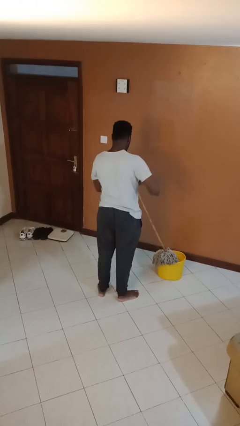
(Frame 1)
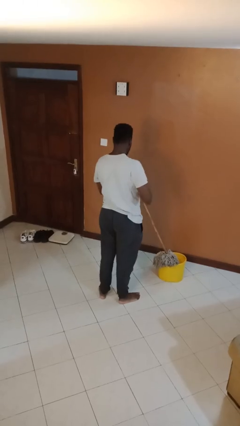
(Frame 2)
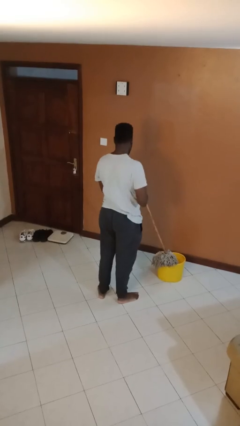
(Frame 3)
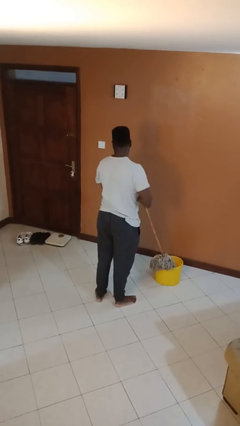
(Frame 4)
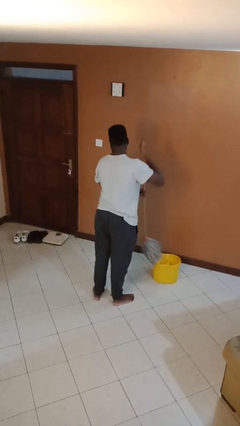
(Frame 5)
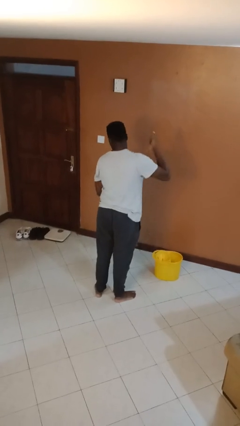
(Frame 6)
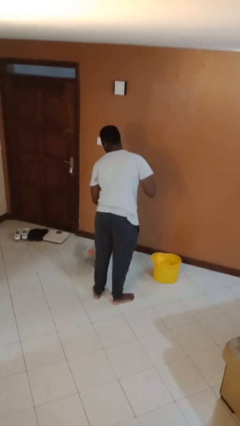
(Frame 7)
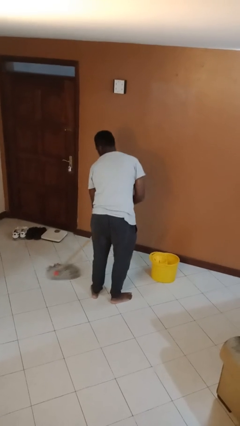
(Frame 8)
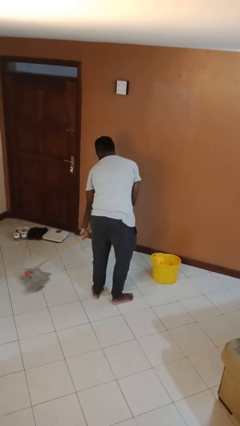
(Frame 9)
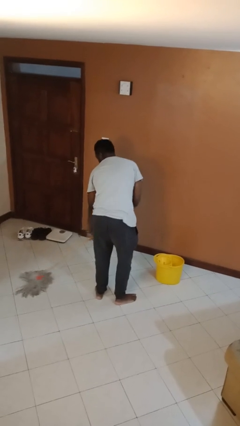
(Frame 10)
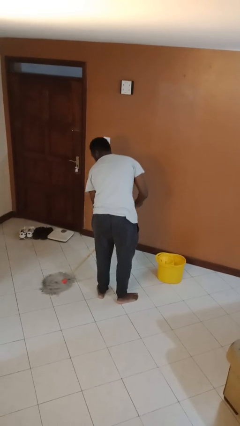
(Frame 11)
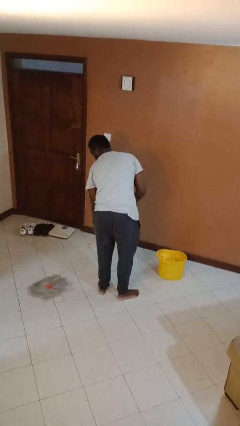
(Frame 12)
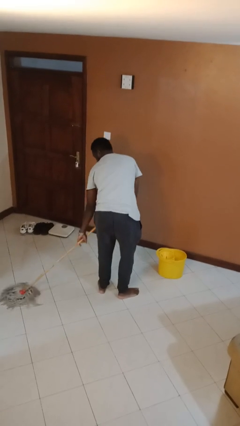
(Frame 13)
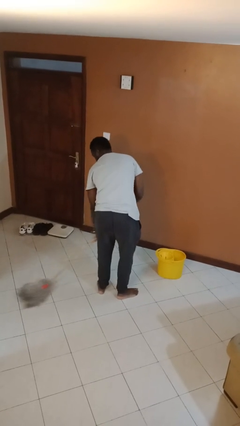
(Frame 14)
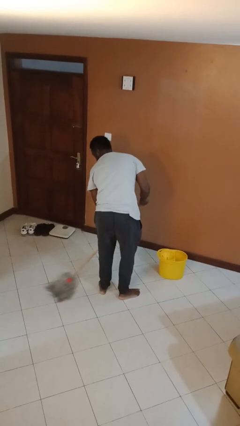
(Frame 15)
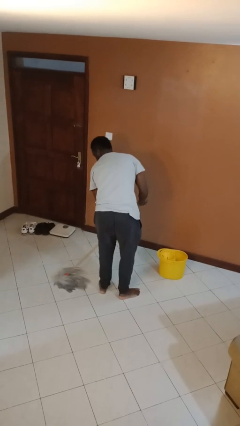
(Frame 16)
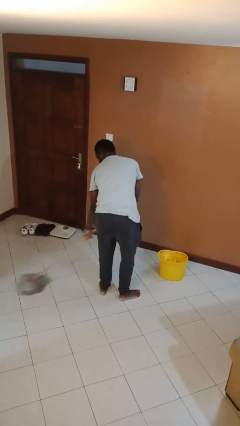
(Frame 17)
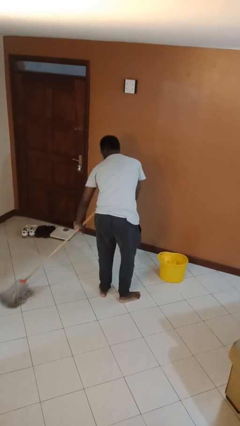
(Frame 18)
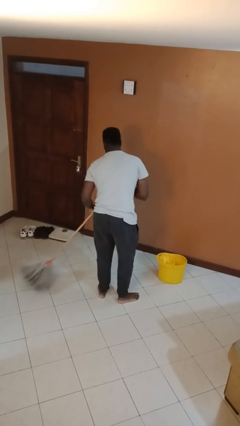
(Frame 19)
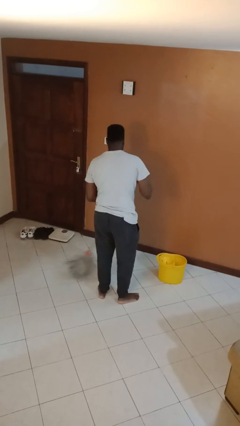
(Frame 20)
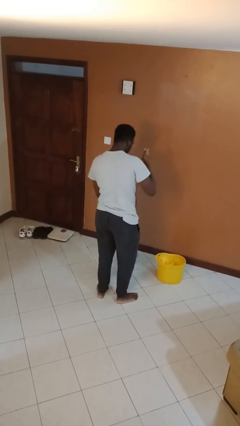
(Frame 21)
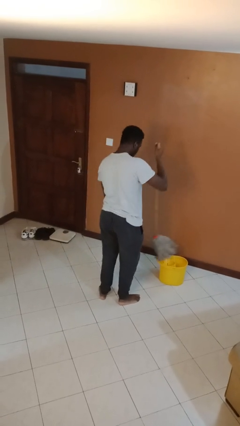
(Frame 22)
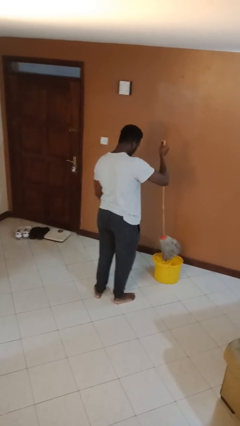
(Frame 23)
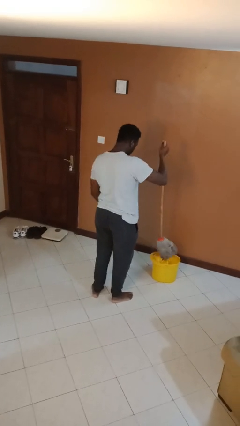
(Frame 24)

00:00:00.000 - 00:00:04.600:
person mops

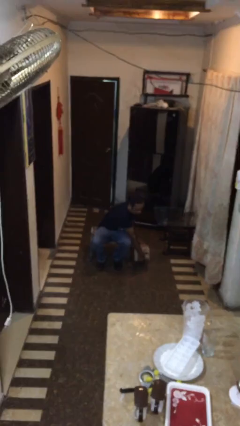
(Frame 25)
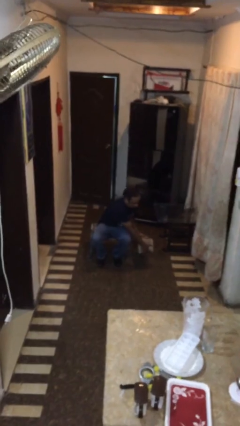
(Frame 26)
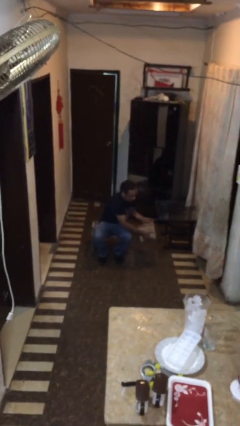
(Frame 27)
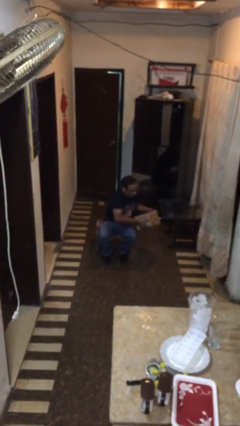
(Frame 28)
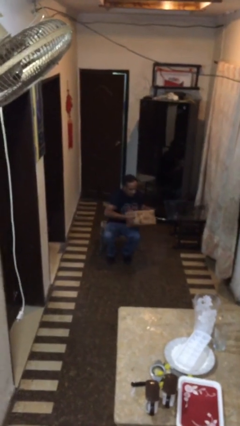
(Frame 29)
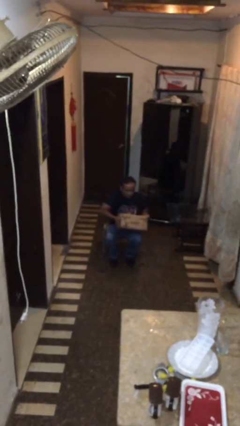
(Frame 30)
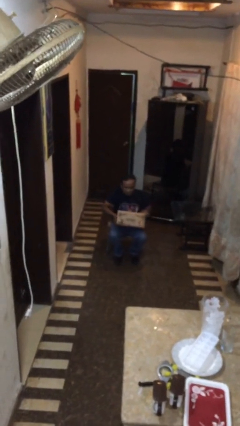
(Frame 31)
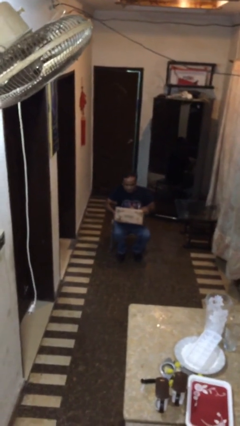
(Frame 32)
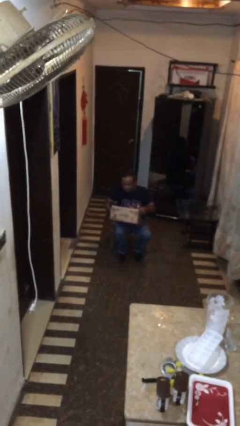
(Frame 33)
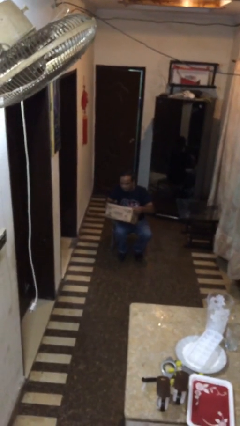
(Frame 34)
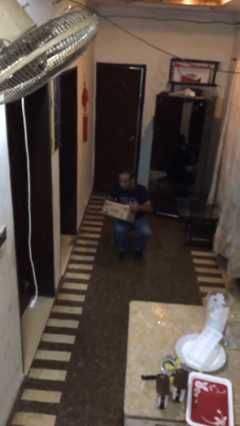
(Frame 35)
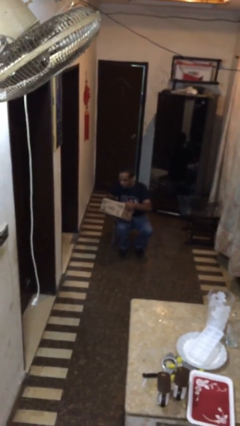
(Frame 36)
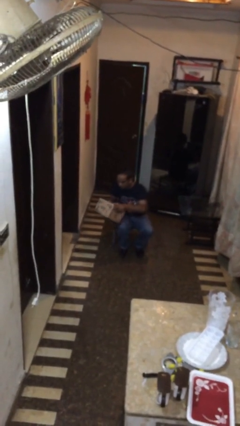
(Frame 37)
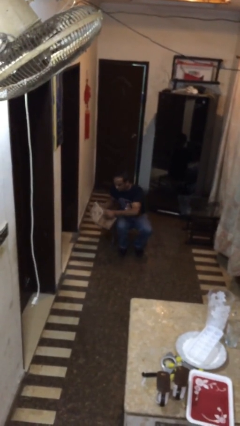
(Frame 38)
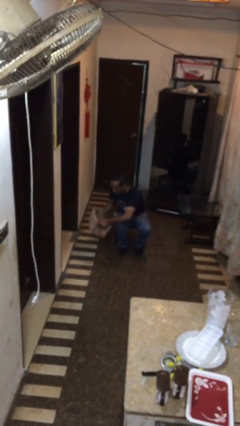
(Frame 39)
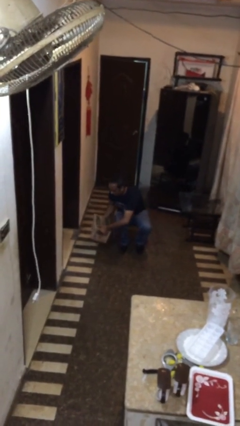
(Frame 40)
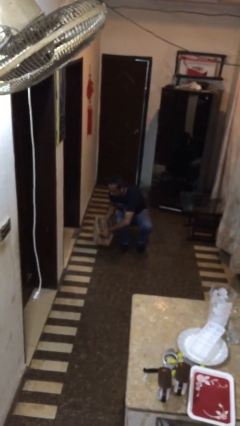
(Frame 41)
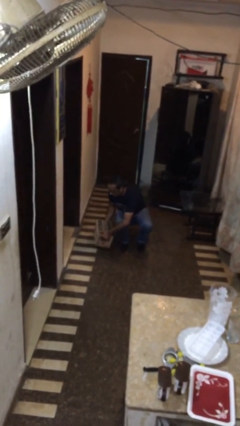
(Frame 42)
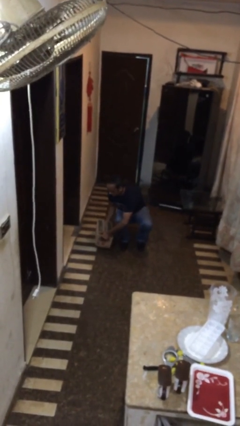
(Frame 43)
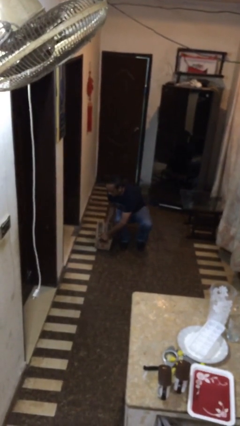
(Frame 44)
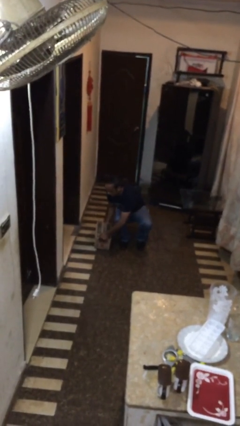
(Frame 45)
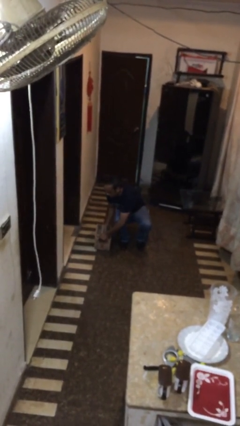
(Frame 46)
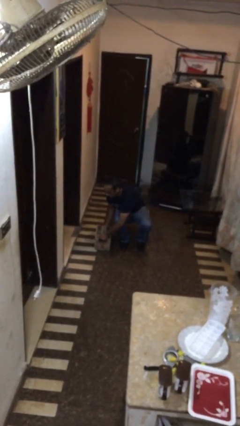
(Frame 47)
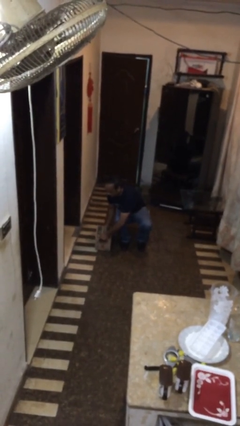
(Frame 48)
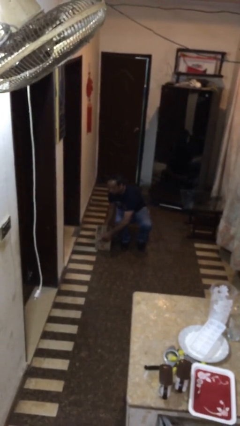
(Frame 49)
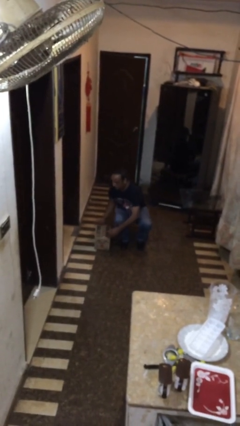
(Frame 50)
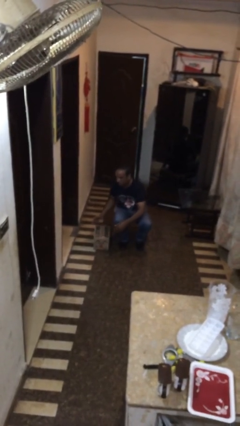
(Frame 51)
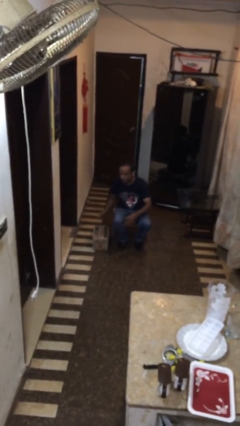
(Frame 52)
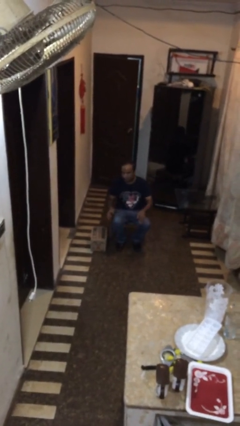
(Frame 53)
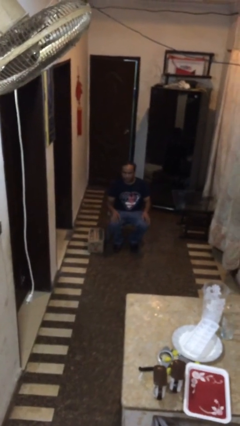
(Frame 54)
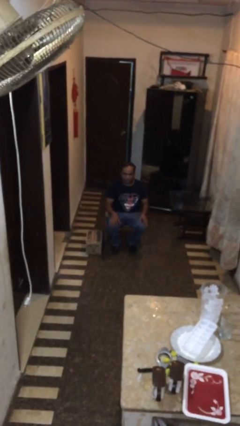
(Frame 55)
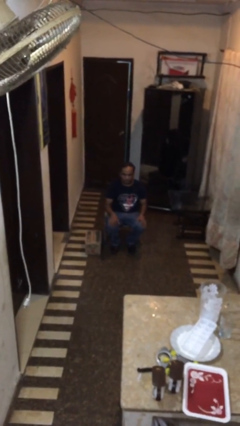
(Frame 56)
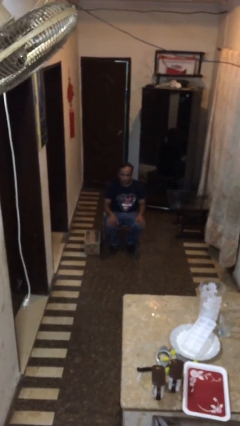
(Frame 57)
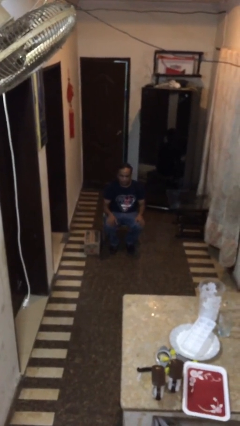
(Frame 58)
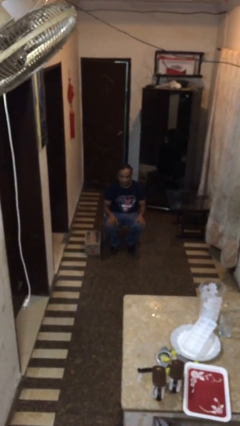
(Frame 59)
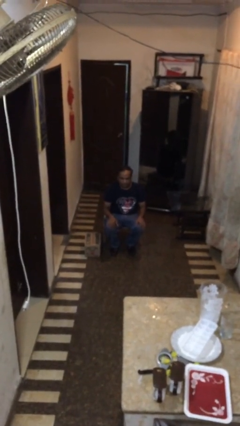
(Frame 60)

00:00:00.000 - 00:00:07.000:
person puts down object on floor

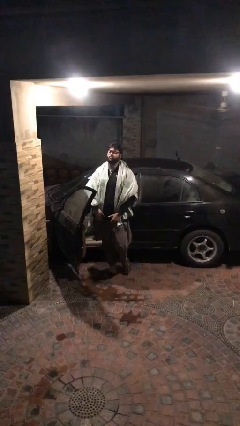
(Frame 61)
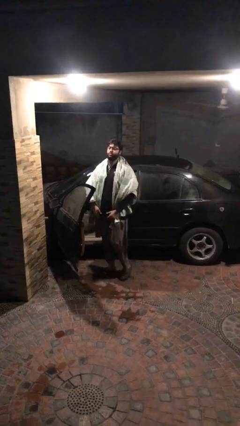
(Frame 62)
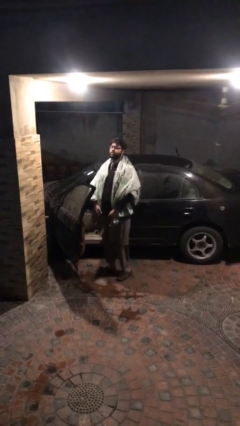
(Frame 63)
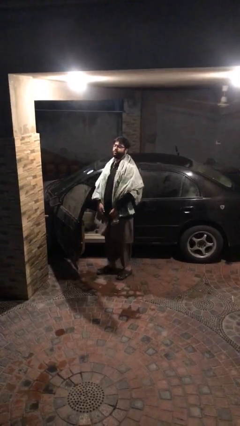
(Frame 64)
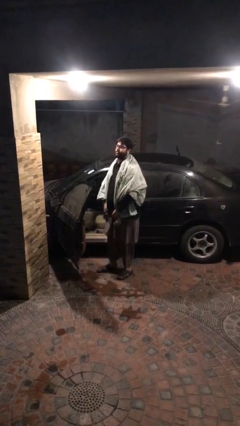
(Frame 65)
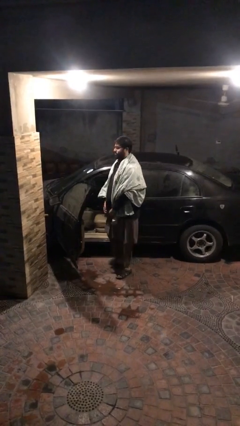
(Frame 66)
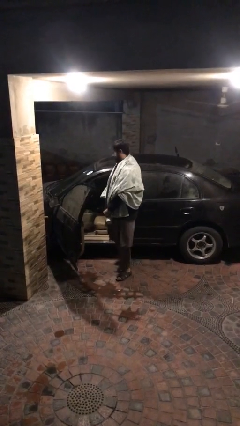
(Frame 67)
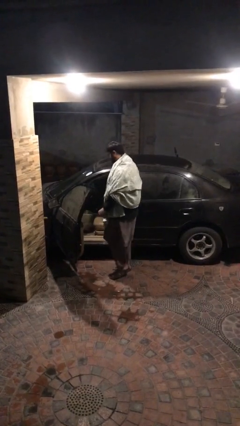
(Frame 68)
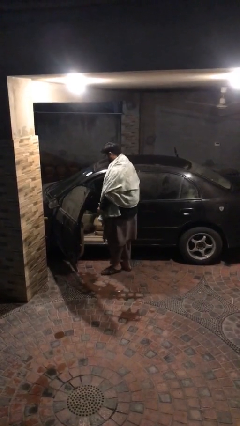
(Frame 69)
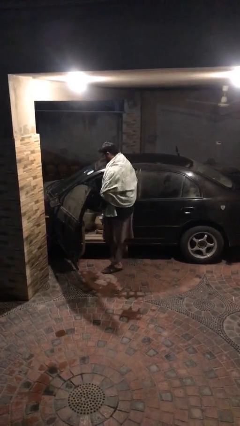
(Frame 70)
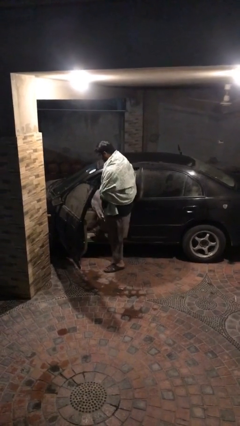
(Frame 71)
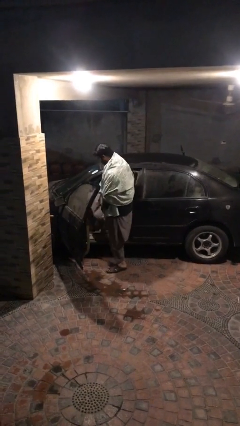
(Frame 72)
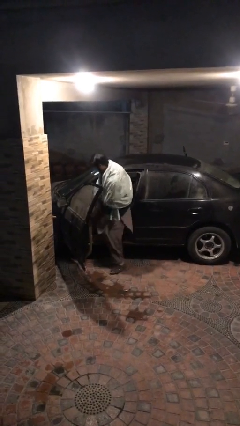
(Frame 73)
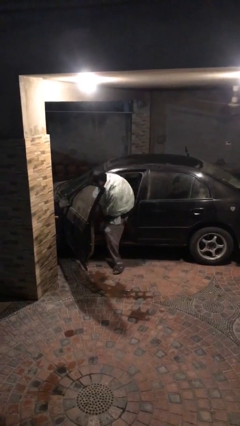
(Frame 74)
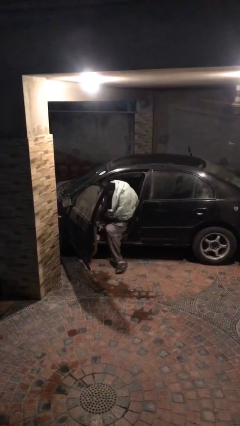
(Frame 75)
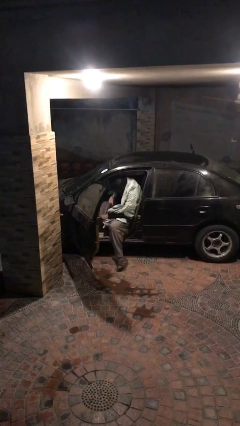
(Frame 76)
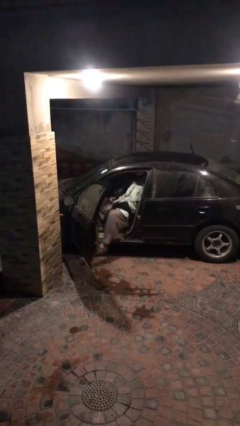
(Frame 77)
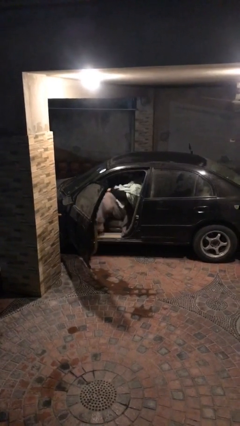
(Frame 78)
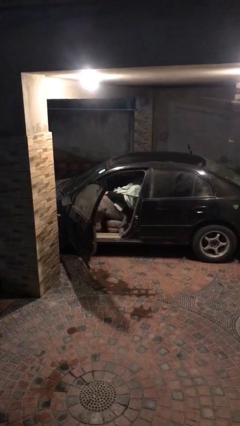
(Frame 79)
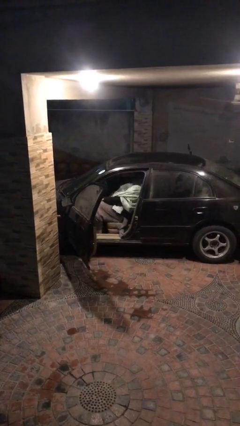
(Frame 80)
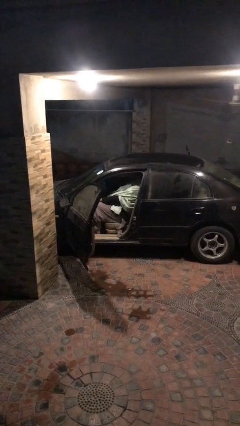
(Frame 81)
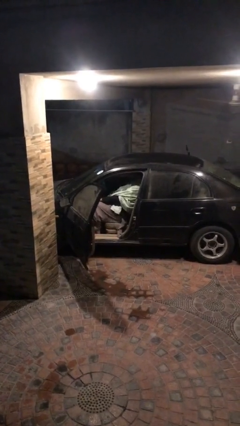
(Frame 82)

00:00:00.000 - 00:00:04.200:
person enters car

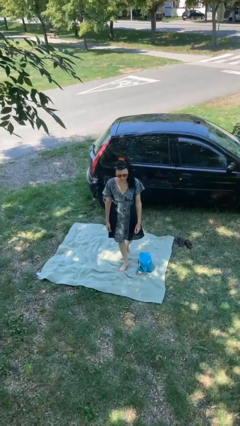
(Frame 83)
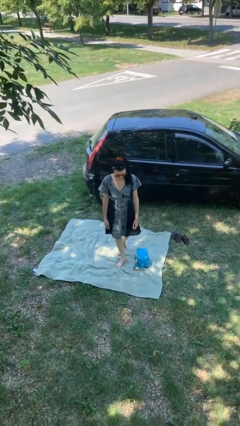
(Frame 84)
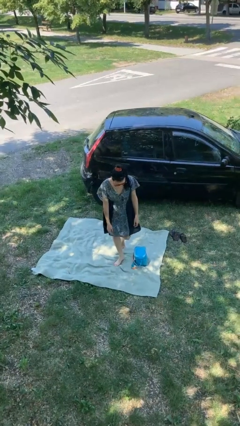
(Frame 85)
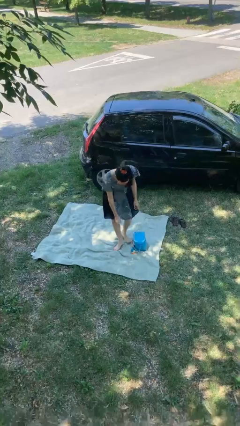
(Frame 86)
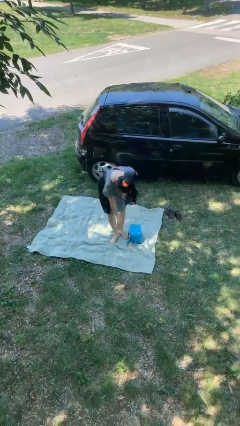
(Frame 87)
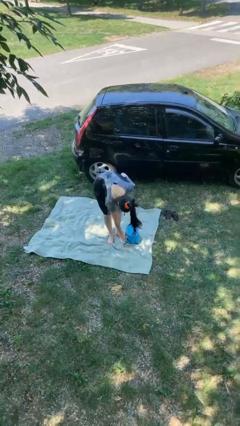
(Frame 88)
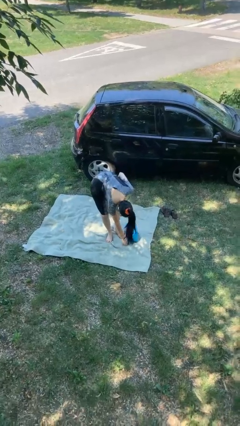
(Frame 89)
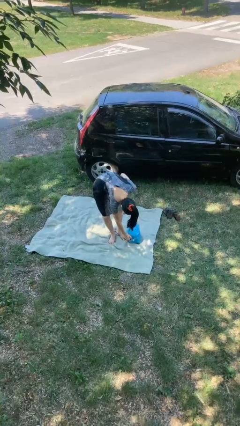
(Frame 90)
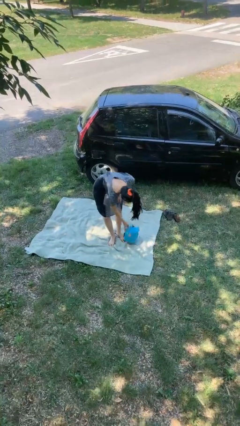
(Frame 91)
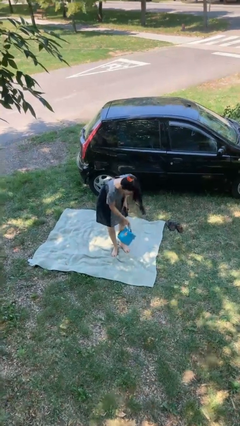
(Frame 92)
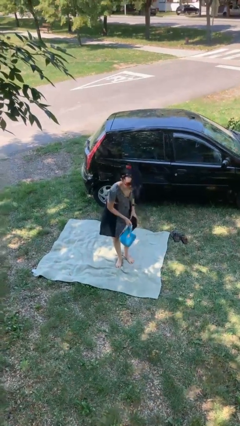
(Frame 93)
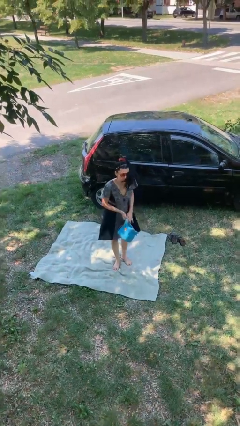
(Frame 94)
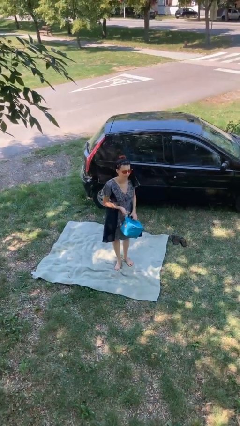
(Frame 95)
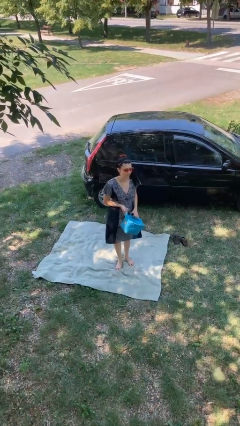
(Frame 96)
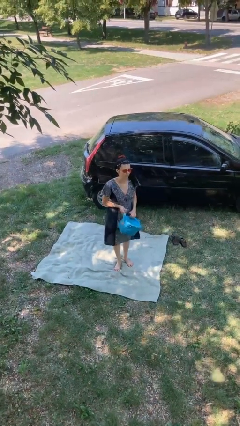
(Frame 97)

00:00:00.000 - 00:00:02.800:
person picks up object from floor
